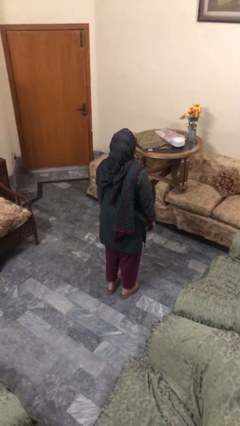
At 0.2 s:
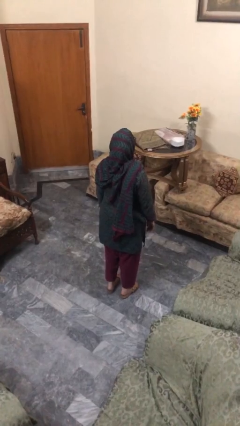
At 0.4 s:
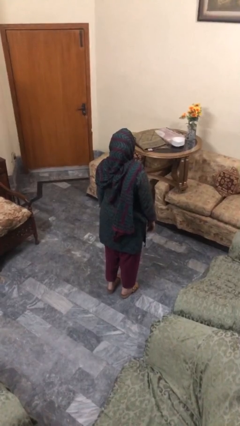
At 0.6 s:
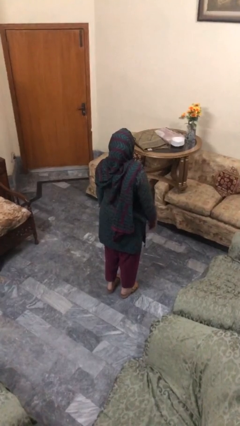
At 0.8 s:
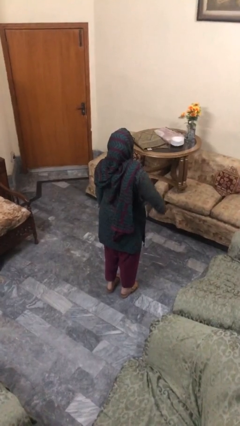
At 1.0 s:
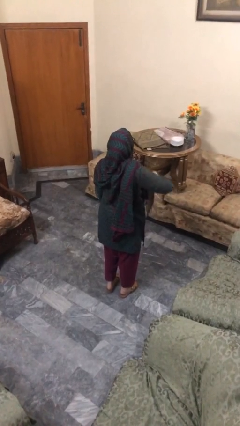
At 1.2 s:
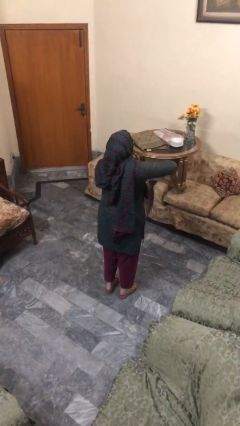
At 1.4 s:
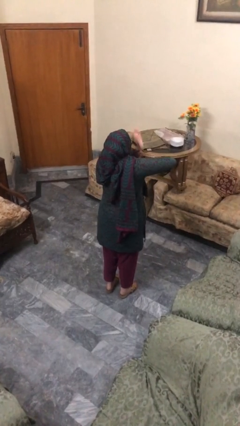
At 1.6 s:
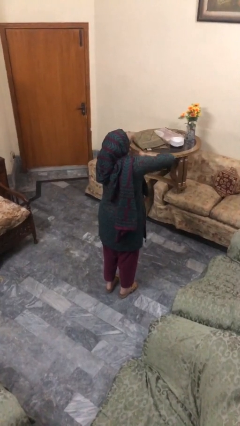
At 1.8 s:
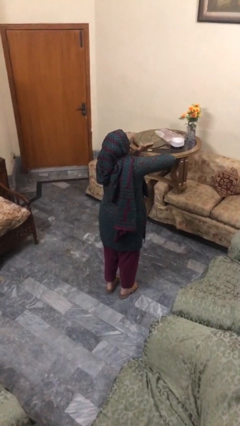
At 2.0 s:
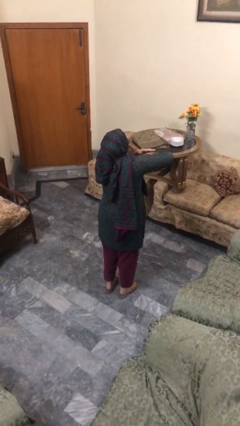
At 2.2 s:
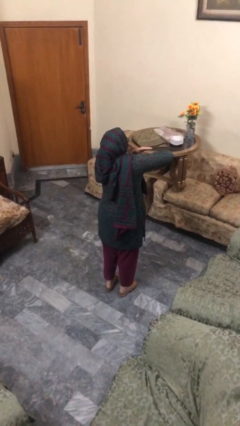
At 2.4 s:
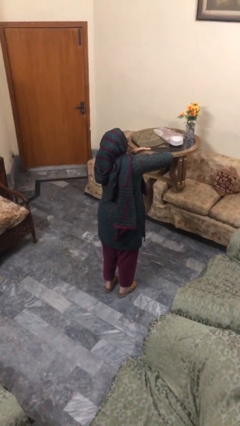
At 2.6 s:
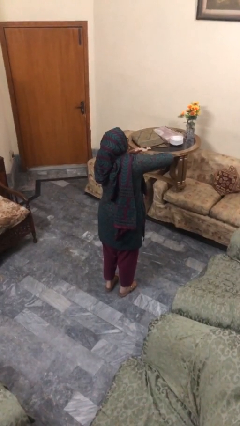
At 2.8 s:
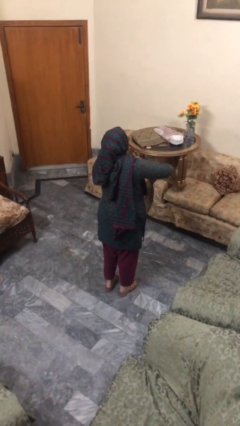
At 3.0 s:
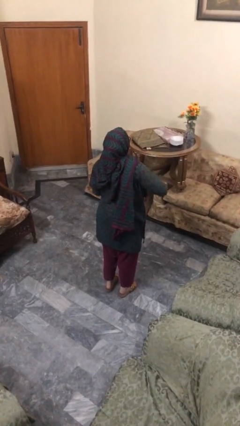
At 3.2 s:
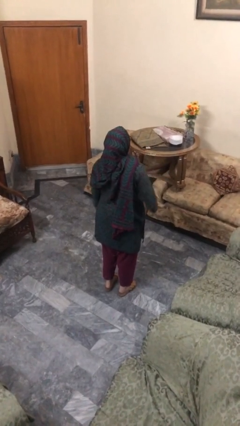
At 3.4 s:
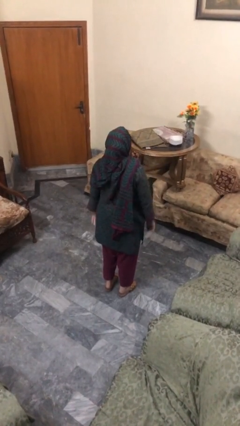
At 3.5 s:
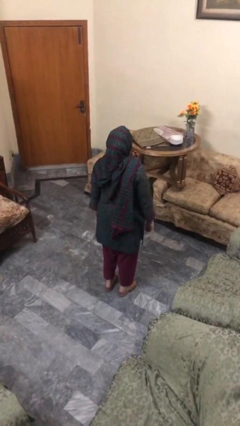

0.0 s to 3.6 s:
person swats bug

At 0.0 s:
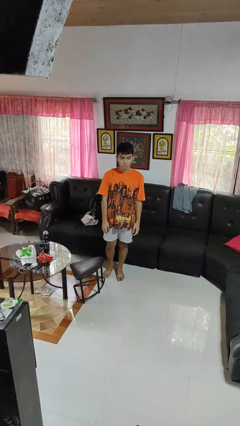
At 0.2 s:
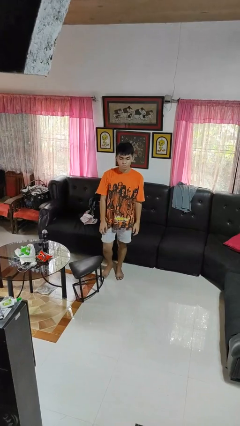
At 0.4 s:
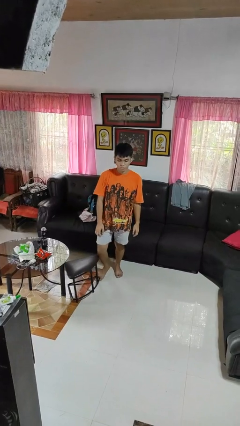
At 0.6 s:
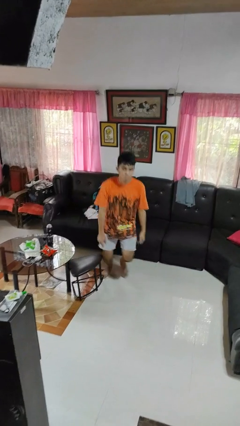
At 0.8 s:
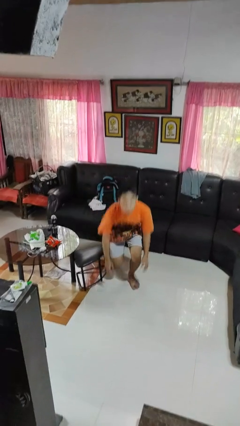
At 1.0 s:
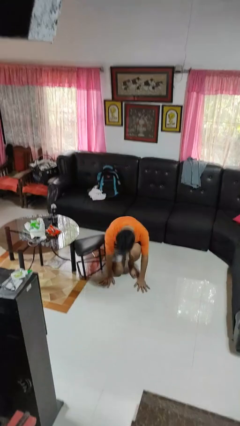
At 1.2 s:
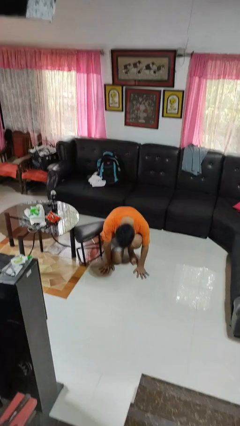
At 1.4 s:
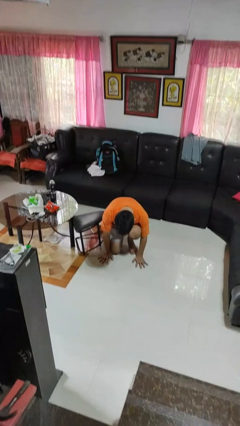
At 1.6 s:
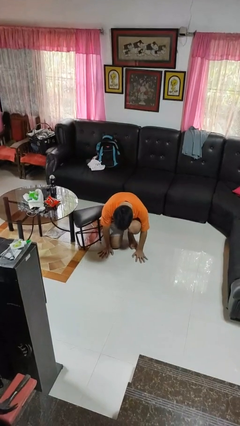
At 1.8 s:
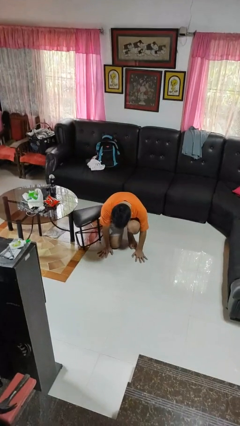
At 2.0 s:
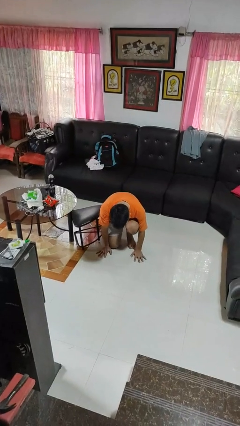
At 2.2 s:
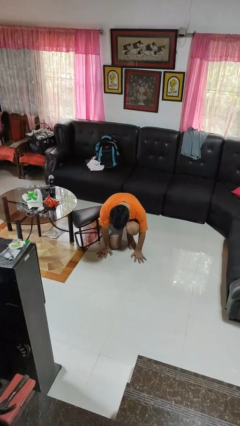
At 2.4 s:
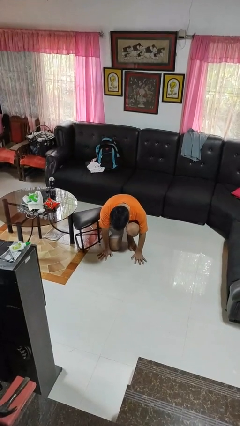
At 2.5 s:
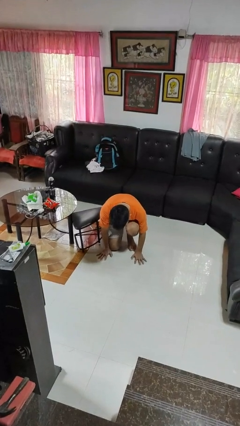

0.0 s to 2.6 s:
person trips on object on floor

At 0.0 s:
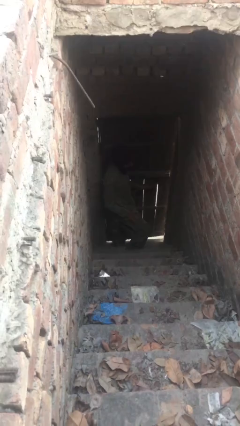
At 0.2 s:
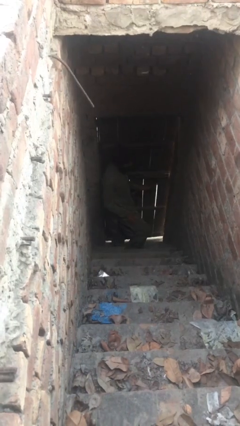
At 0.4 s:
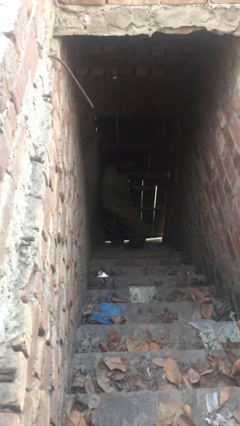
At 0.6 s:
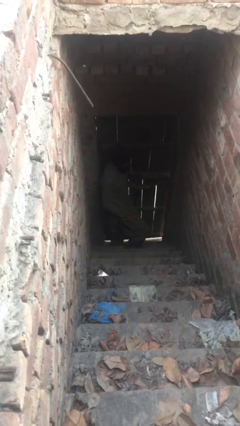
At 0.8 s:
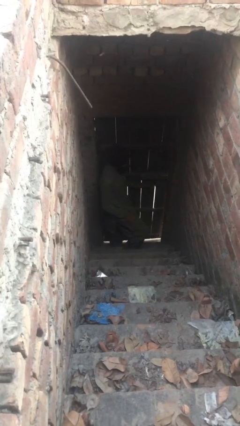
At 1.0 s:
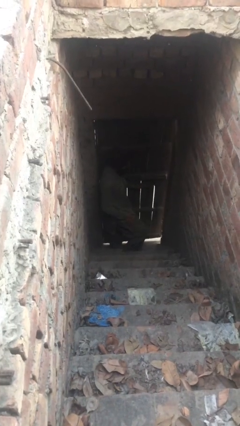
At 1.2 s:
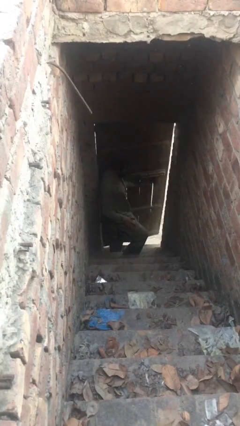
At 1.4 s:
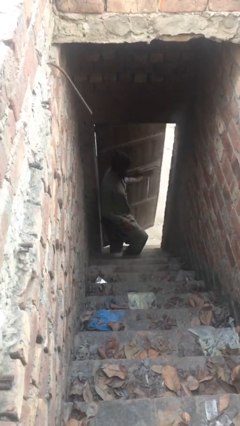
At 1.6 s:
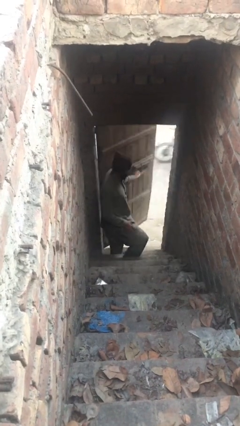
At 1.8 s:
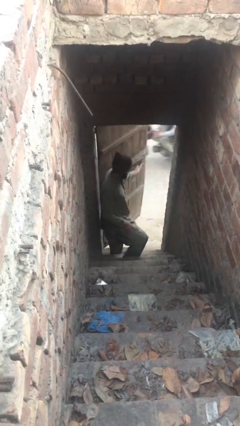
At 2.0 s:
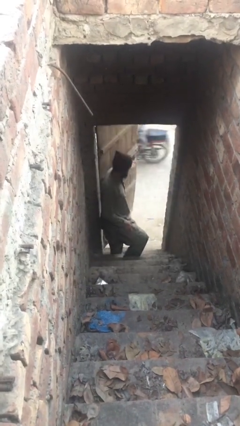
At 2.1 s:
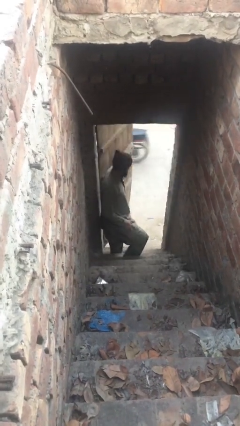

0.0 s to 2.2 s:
person opens facility door

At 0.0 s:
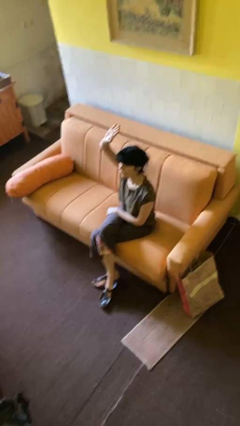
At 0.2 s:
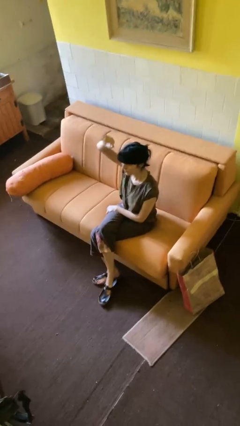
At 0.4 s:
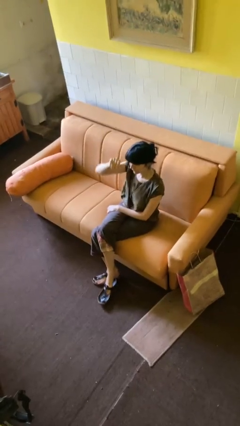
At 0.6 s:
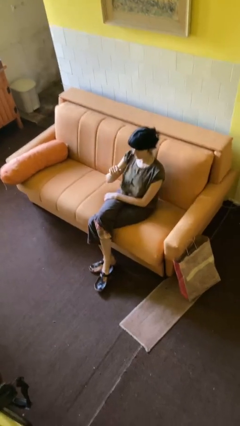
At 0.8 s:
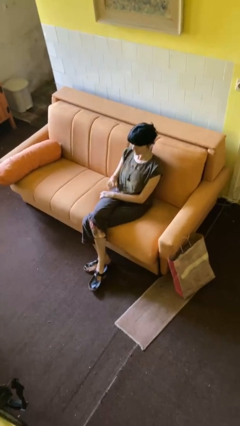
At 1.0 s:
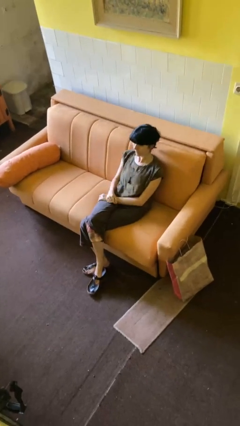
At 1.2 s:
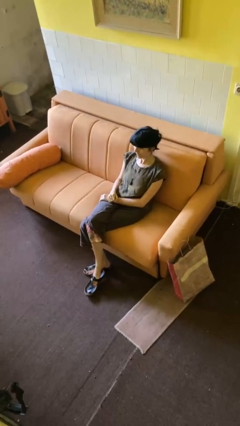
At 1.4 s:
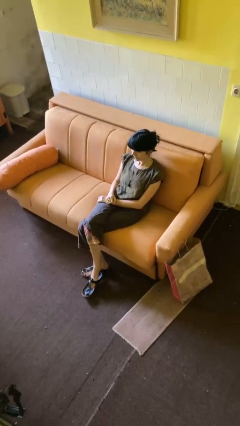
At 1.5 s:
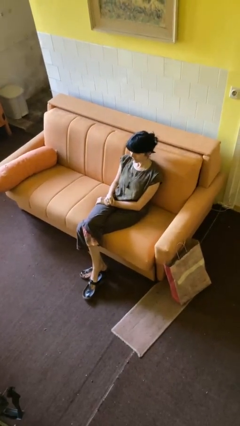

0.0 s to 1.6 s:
person gestures lower hand

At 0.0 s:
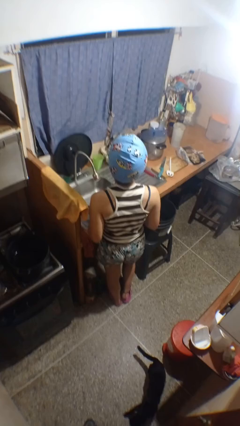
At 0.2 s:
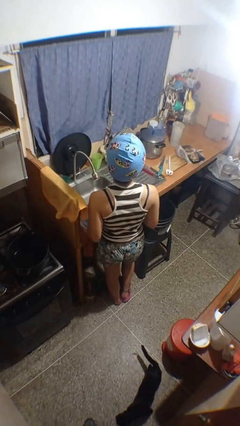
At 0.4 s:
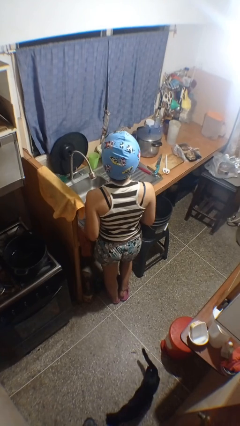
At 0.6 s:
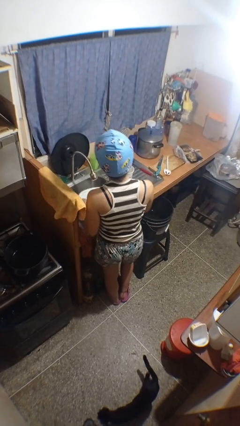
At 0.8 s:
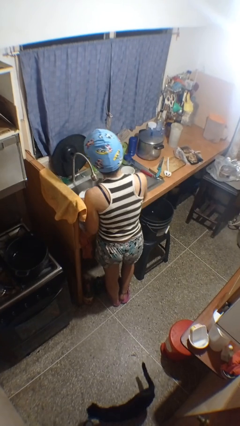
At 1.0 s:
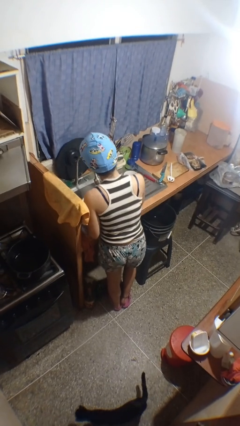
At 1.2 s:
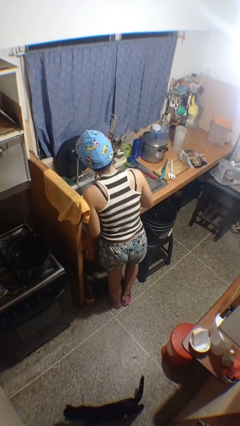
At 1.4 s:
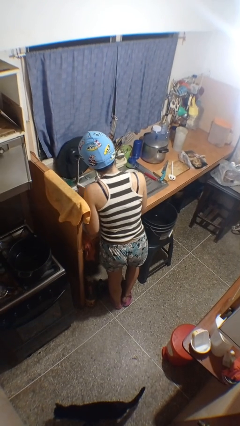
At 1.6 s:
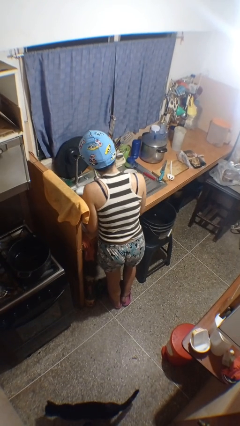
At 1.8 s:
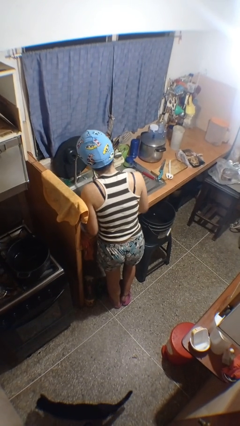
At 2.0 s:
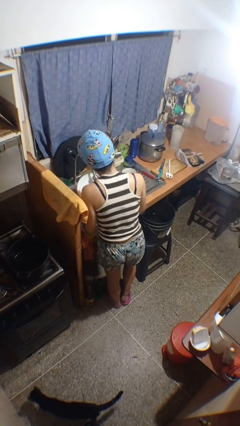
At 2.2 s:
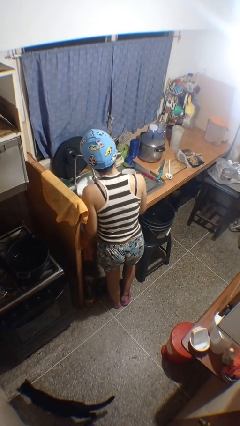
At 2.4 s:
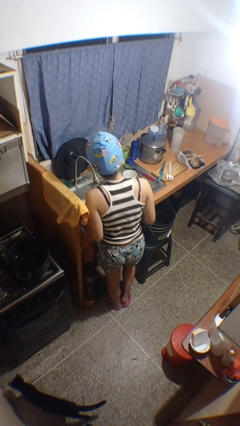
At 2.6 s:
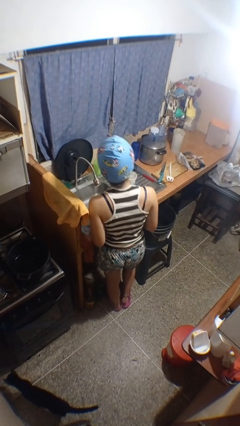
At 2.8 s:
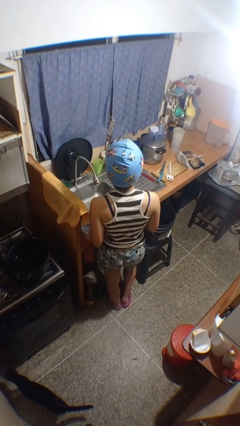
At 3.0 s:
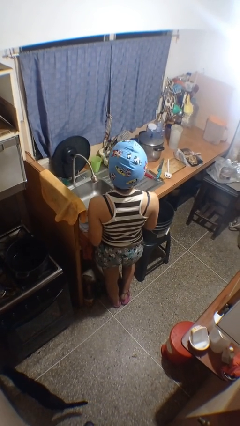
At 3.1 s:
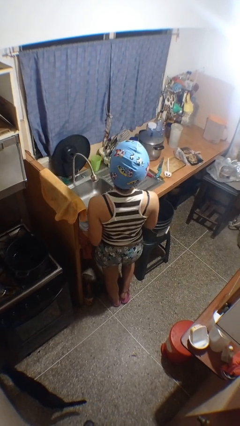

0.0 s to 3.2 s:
person washes dish

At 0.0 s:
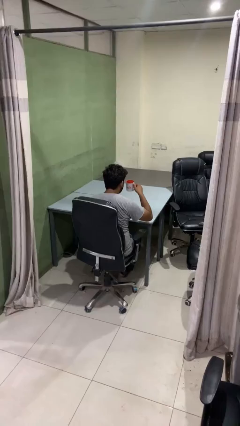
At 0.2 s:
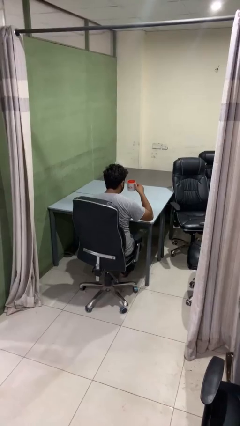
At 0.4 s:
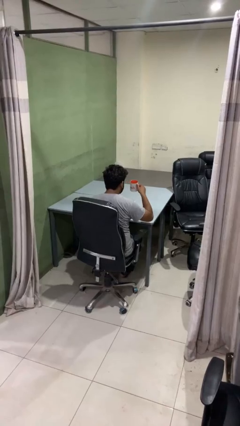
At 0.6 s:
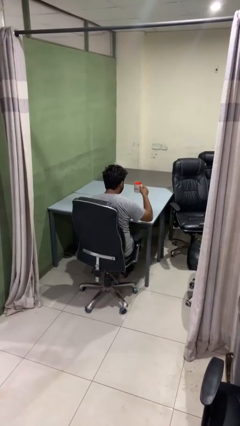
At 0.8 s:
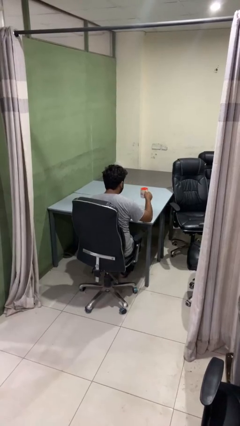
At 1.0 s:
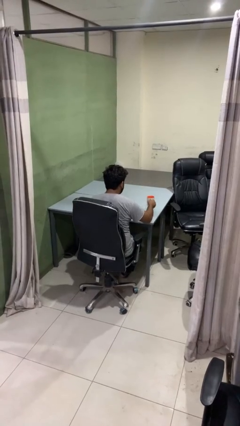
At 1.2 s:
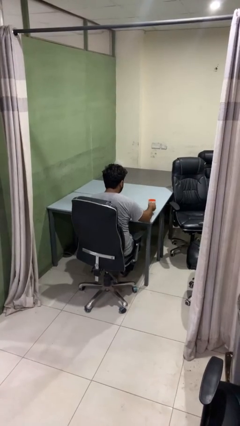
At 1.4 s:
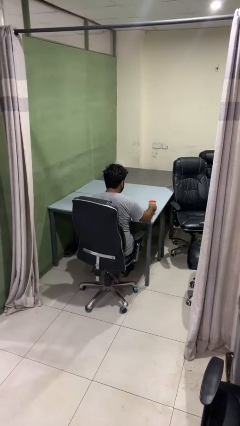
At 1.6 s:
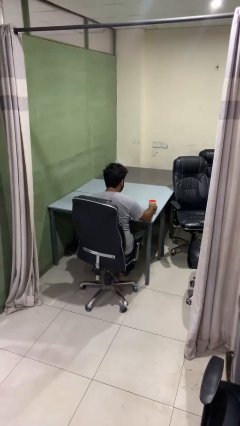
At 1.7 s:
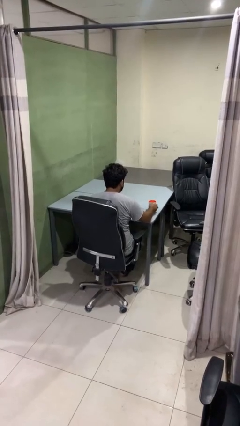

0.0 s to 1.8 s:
person puts down object on table

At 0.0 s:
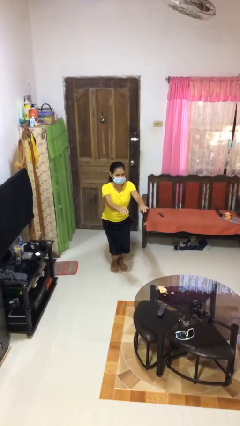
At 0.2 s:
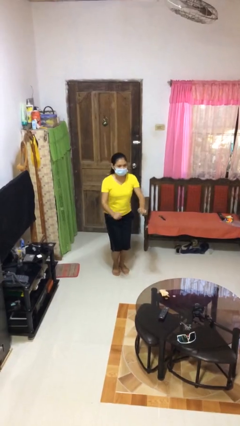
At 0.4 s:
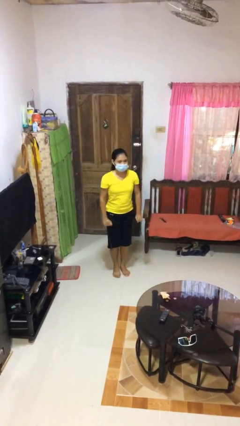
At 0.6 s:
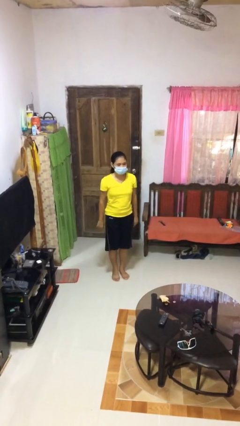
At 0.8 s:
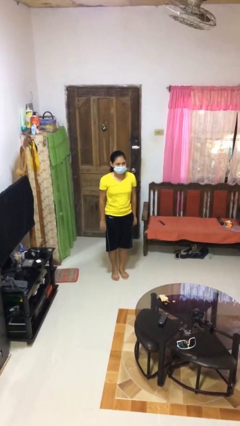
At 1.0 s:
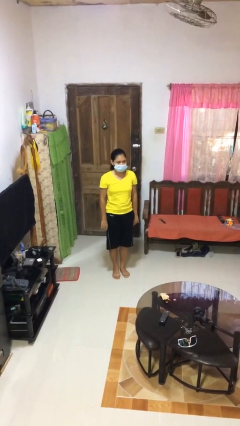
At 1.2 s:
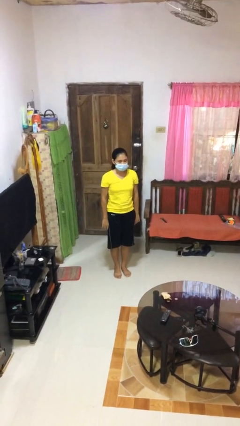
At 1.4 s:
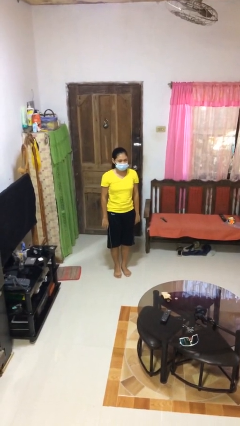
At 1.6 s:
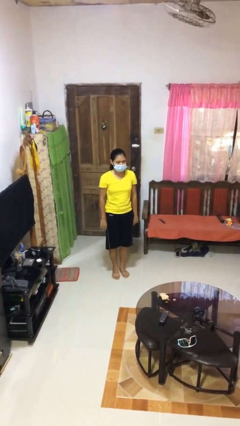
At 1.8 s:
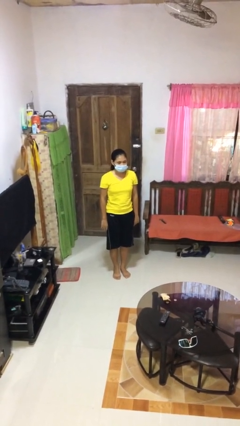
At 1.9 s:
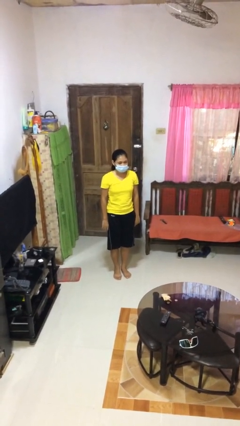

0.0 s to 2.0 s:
person stands up
